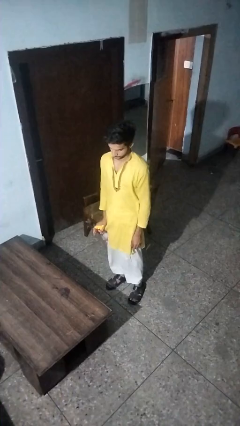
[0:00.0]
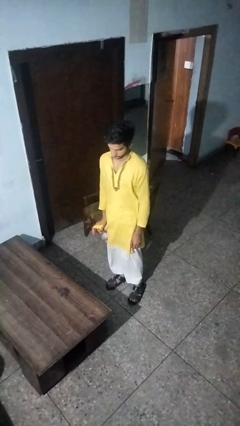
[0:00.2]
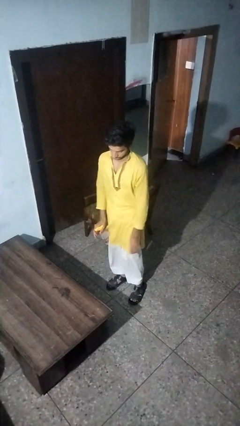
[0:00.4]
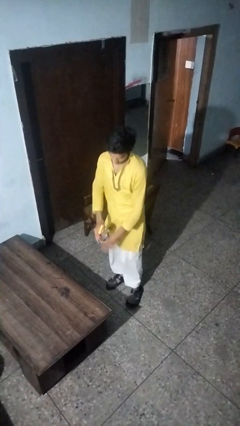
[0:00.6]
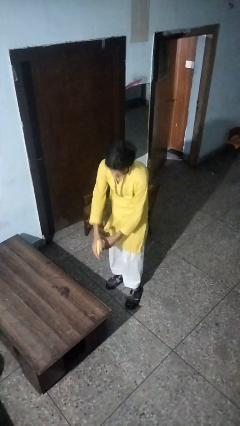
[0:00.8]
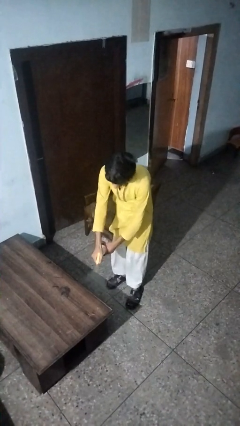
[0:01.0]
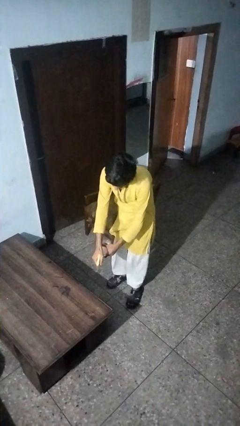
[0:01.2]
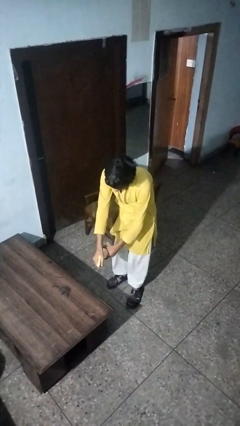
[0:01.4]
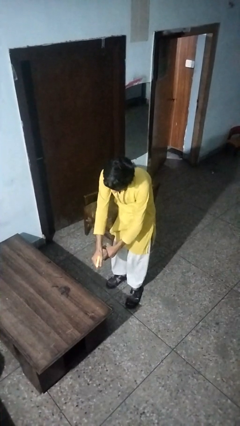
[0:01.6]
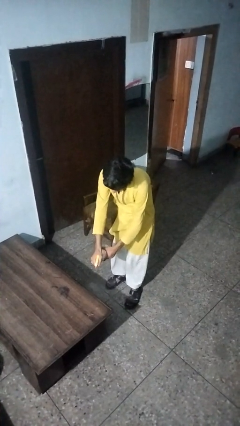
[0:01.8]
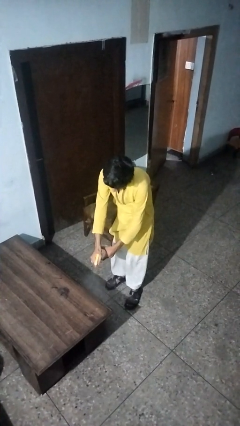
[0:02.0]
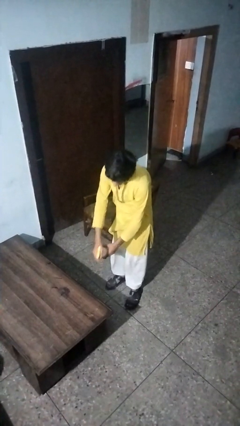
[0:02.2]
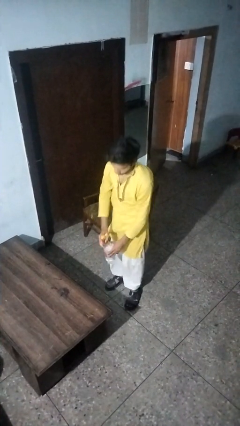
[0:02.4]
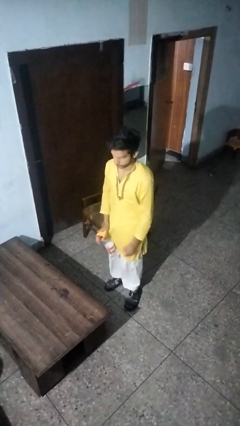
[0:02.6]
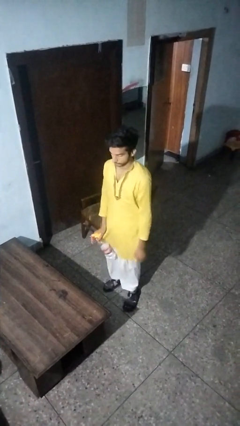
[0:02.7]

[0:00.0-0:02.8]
person sprays from bottle

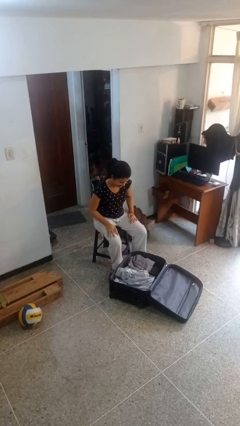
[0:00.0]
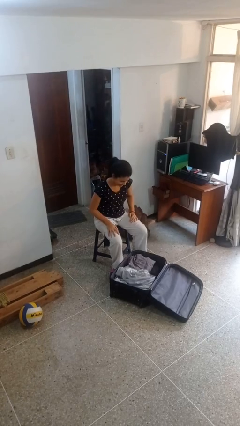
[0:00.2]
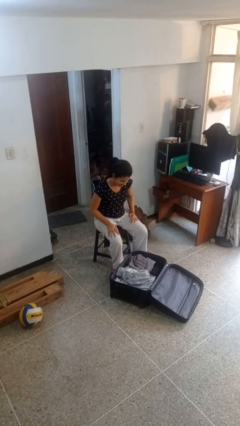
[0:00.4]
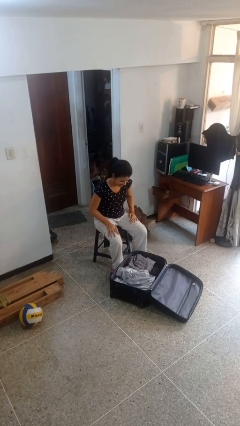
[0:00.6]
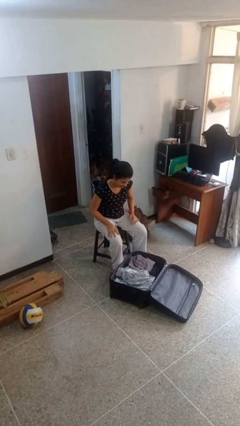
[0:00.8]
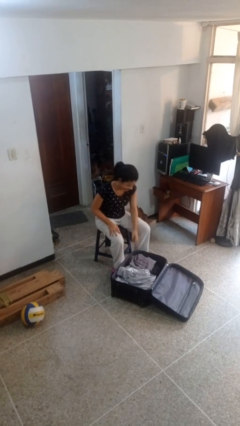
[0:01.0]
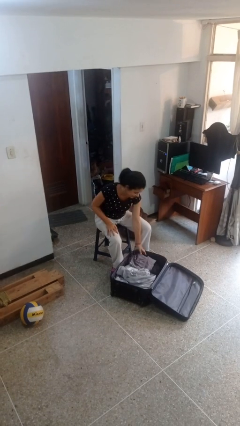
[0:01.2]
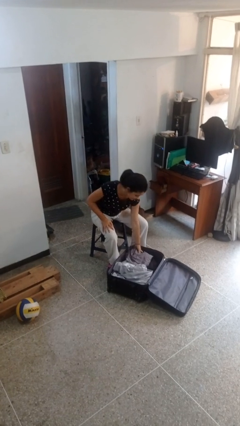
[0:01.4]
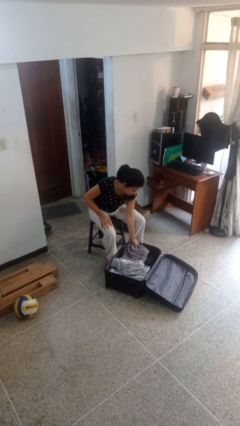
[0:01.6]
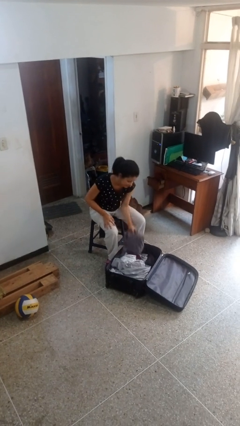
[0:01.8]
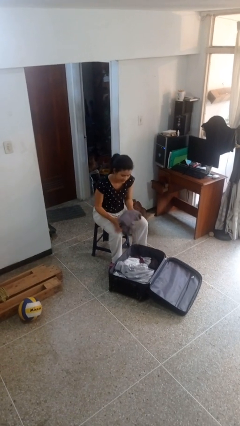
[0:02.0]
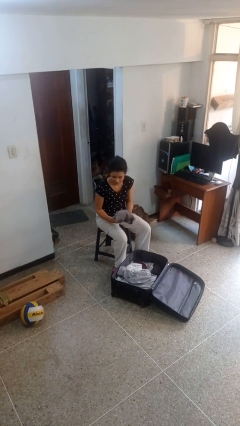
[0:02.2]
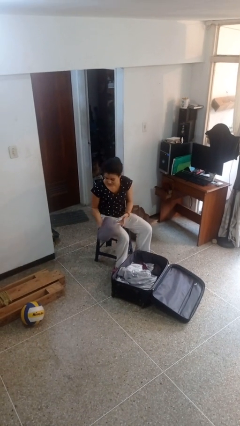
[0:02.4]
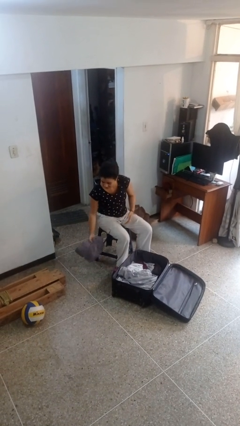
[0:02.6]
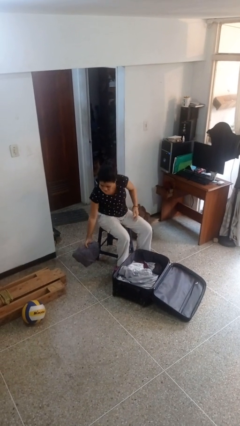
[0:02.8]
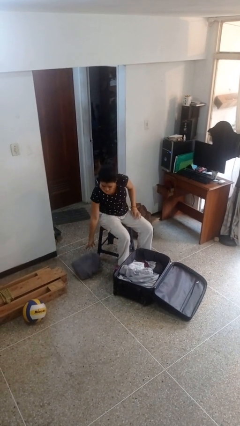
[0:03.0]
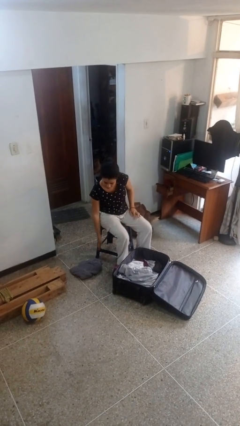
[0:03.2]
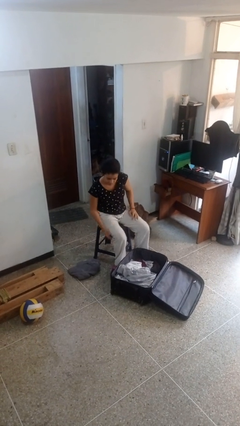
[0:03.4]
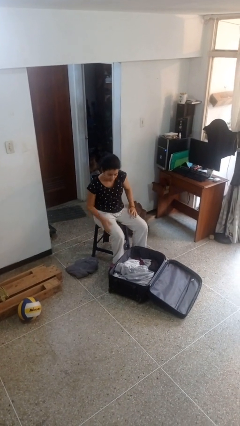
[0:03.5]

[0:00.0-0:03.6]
person unloads clothes from suitcase

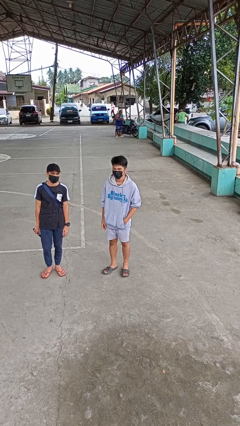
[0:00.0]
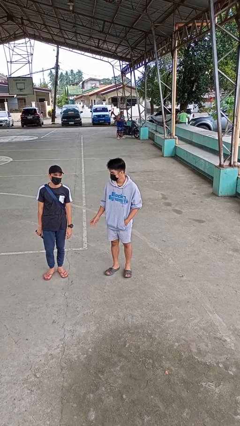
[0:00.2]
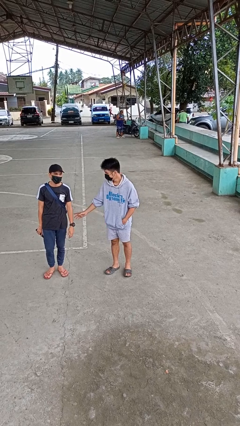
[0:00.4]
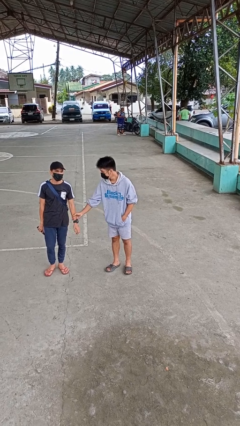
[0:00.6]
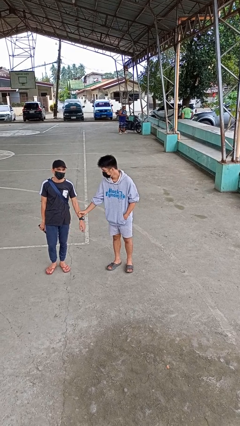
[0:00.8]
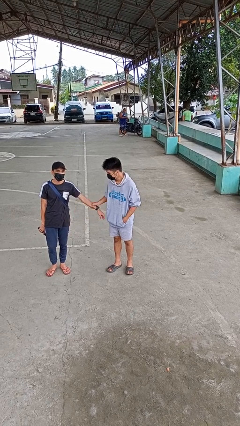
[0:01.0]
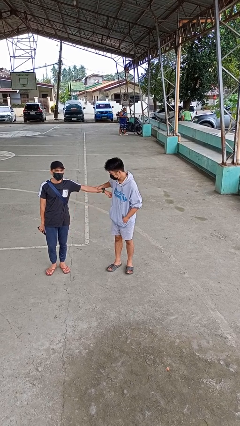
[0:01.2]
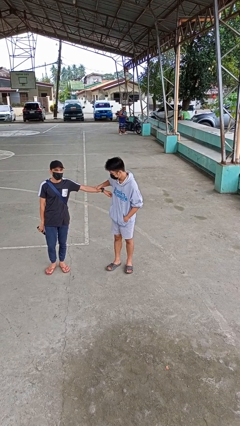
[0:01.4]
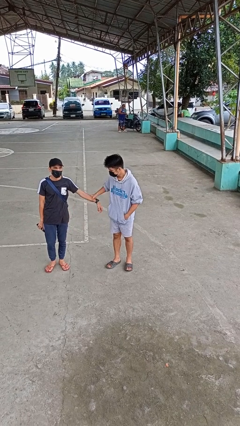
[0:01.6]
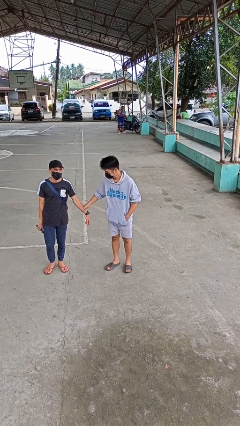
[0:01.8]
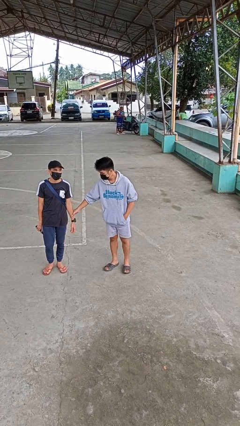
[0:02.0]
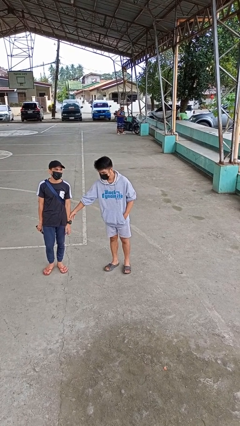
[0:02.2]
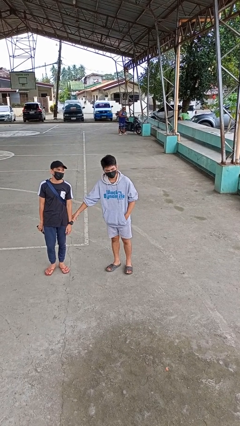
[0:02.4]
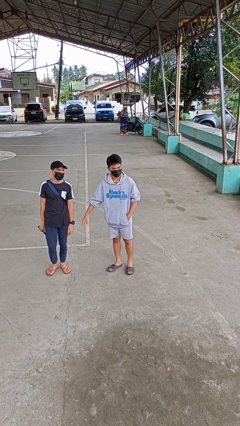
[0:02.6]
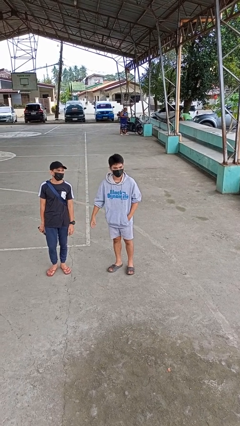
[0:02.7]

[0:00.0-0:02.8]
person grabs person by forearm

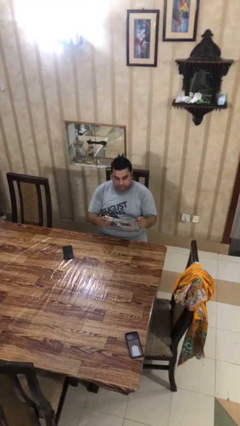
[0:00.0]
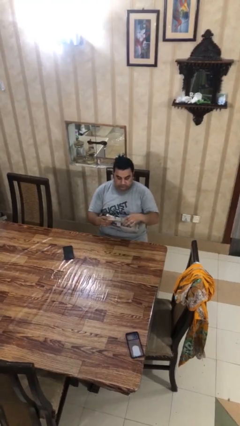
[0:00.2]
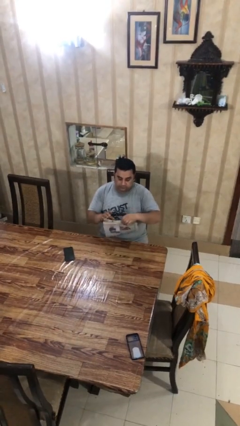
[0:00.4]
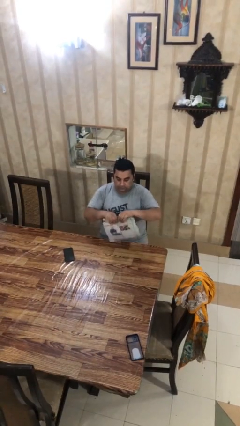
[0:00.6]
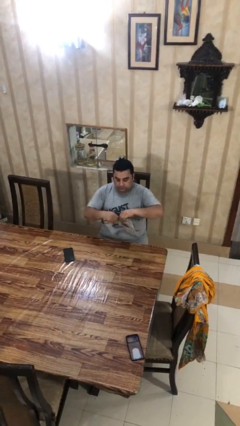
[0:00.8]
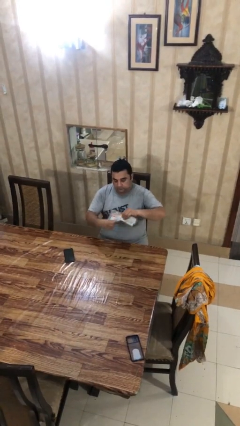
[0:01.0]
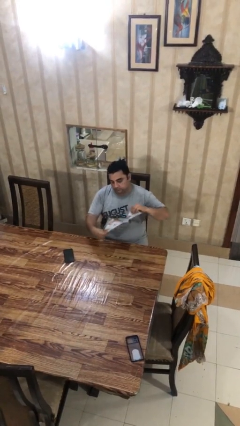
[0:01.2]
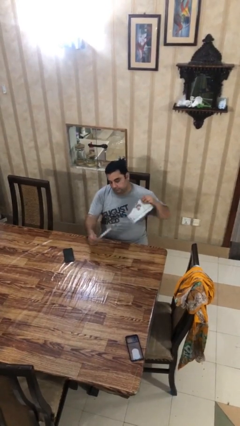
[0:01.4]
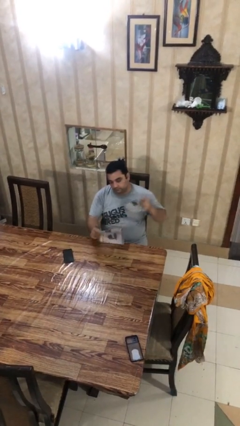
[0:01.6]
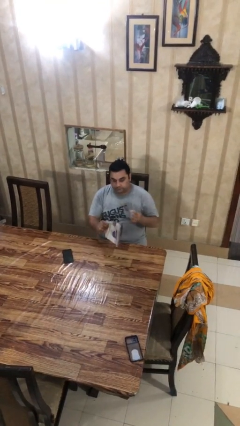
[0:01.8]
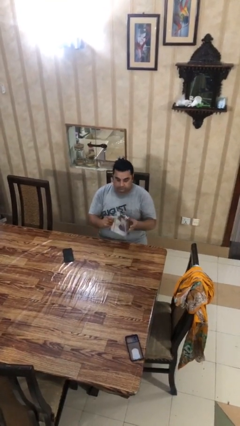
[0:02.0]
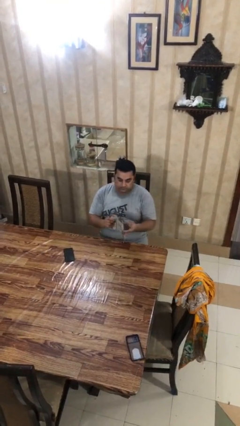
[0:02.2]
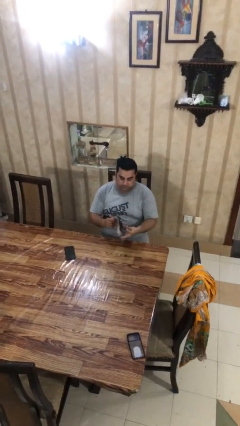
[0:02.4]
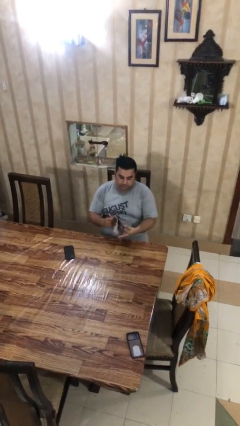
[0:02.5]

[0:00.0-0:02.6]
person tears paper

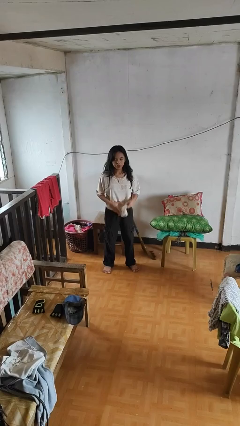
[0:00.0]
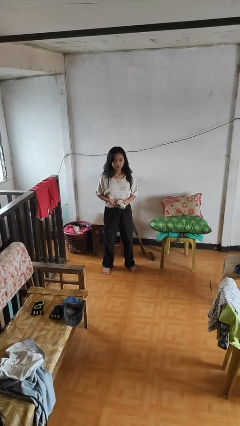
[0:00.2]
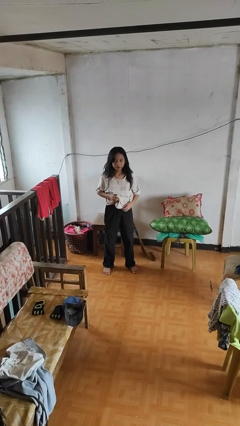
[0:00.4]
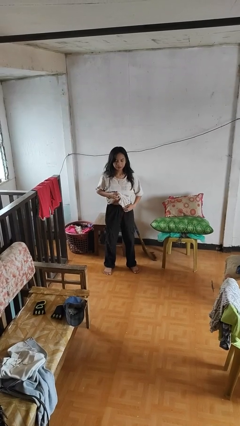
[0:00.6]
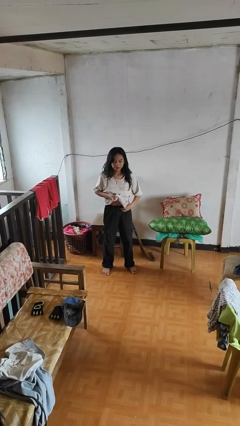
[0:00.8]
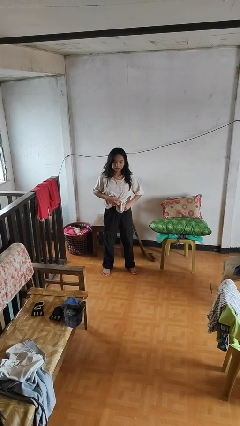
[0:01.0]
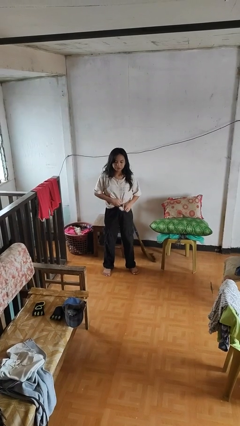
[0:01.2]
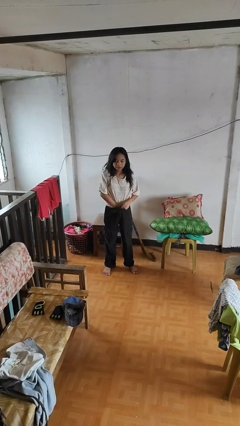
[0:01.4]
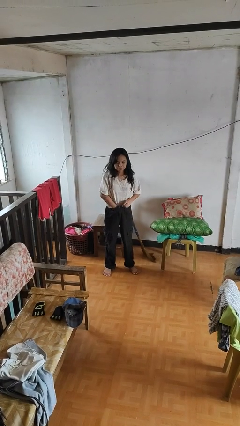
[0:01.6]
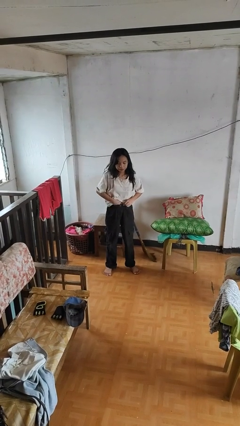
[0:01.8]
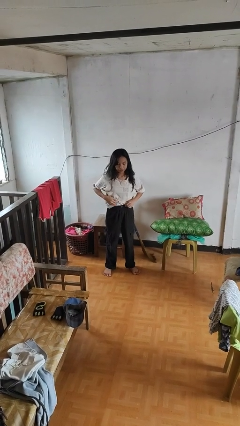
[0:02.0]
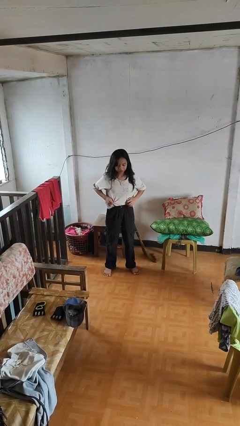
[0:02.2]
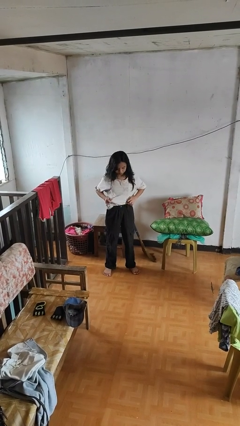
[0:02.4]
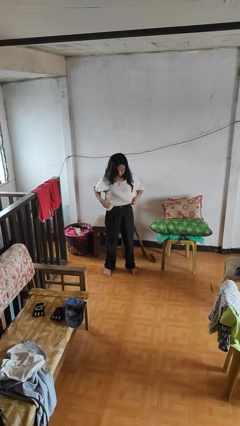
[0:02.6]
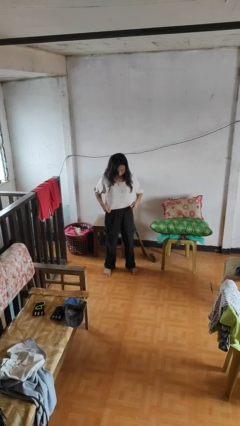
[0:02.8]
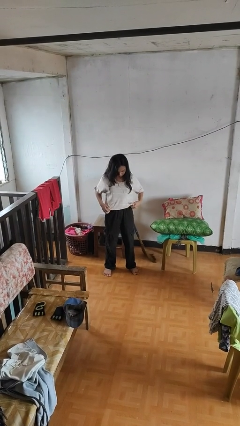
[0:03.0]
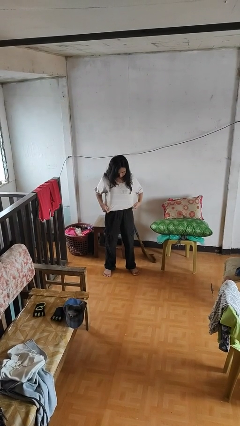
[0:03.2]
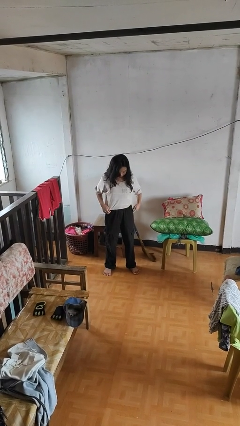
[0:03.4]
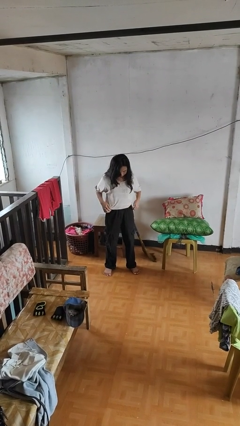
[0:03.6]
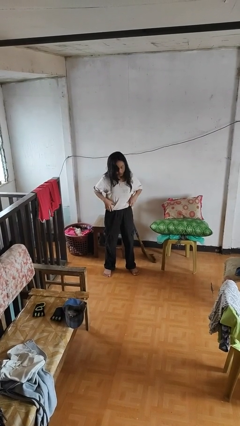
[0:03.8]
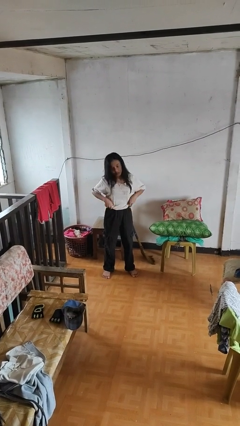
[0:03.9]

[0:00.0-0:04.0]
person tucks in shirt

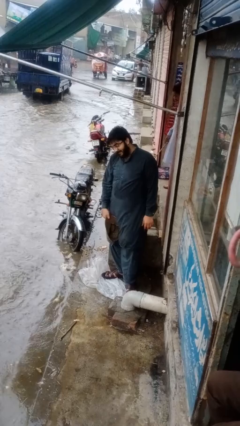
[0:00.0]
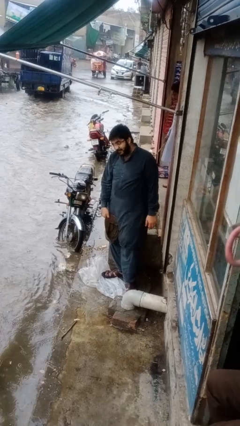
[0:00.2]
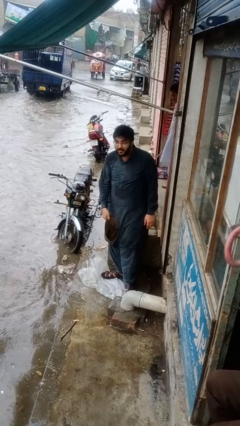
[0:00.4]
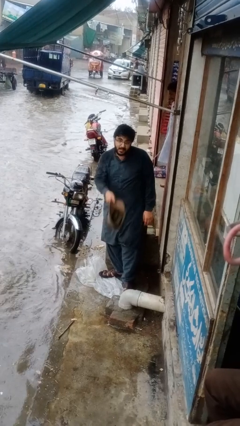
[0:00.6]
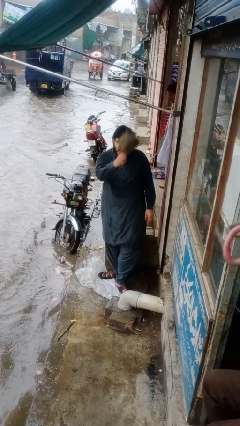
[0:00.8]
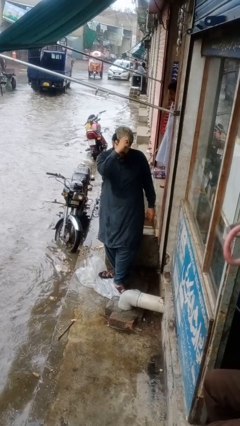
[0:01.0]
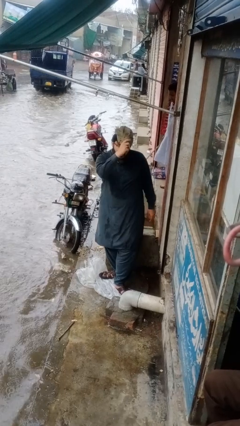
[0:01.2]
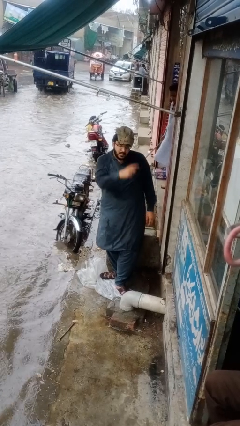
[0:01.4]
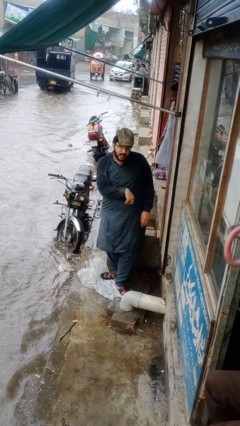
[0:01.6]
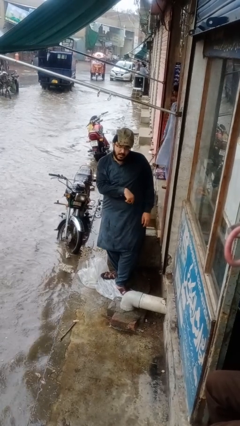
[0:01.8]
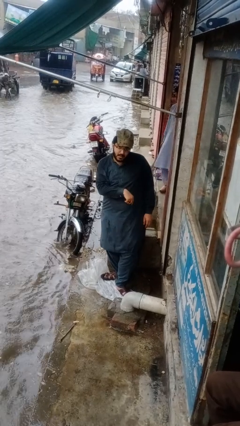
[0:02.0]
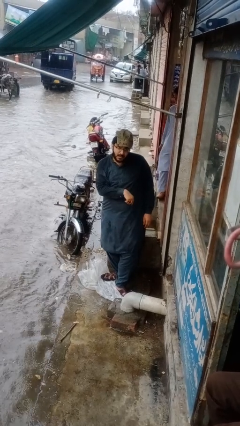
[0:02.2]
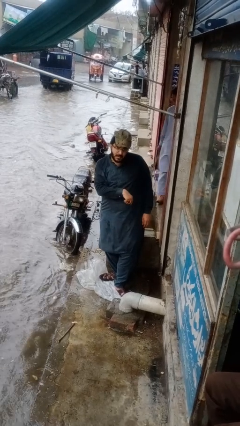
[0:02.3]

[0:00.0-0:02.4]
person puts on hat
